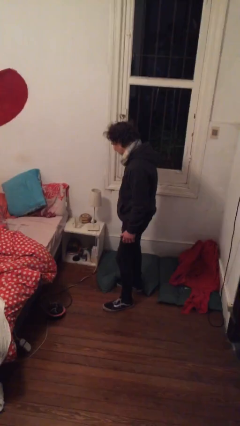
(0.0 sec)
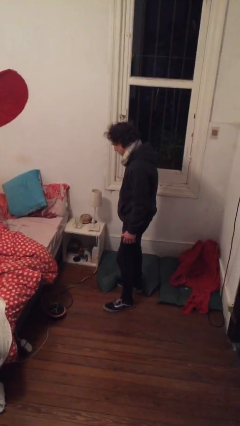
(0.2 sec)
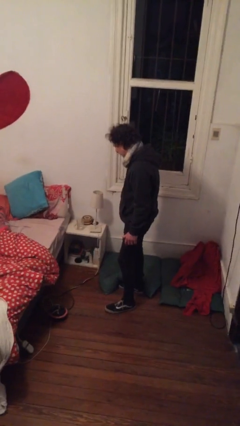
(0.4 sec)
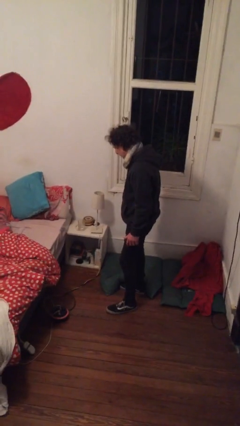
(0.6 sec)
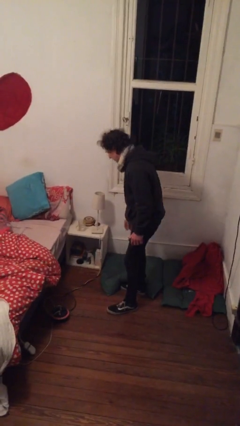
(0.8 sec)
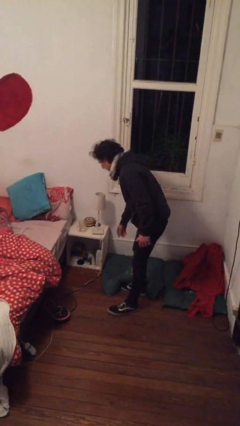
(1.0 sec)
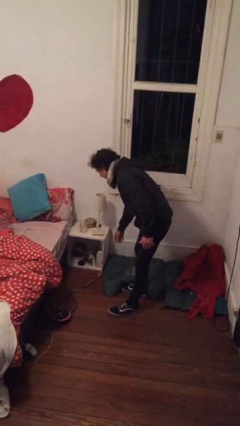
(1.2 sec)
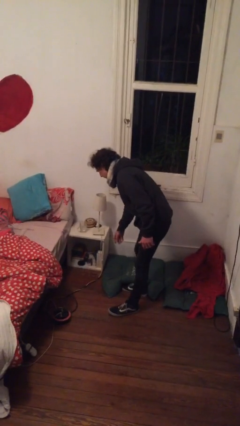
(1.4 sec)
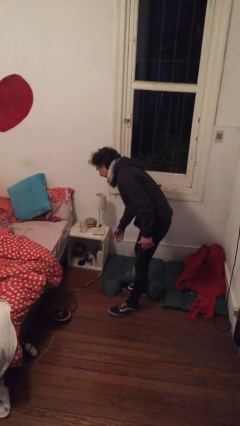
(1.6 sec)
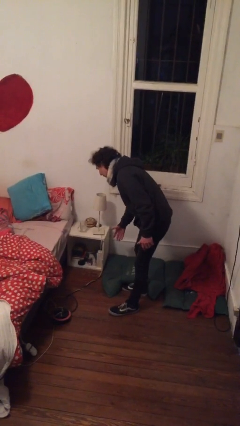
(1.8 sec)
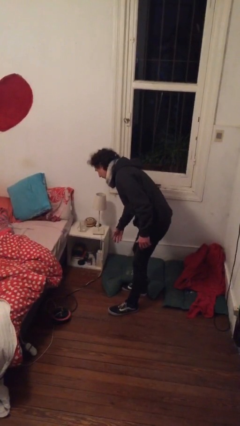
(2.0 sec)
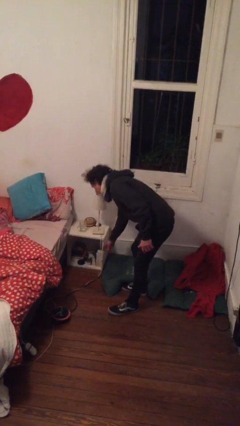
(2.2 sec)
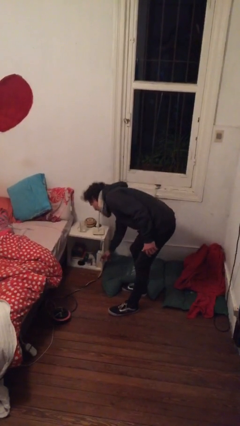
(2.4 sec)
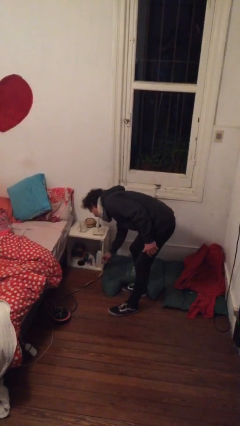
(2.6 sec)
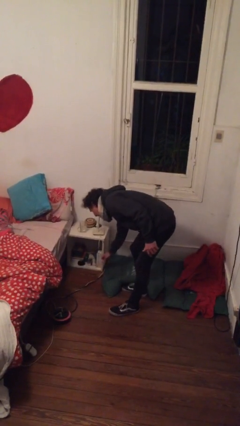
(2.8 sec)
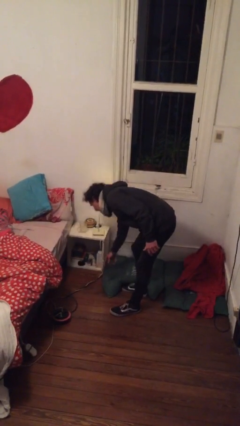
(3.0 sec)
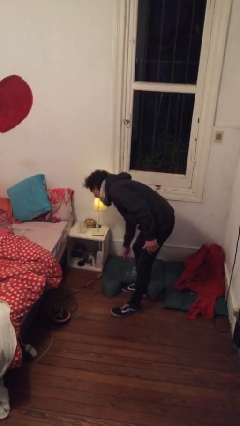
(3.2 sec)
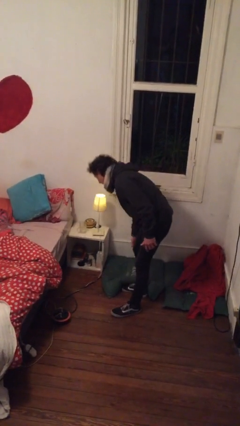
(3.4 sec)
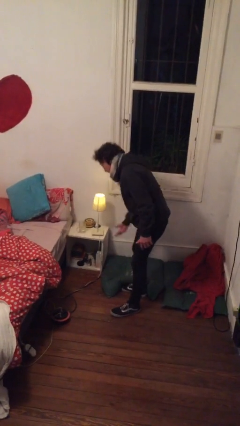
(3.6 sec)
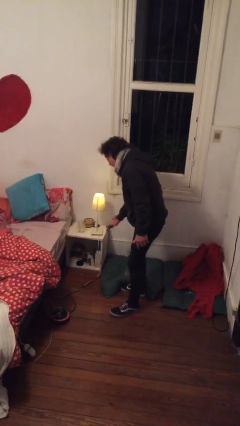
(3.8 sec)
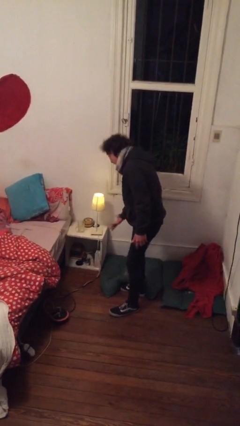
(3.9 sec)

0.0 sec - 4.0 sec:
person turns on lamp

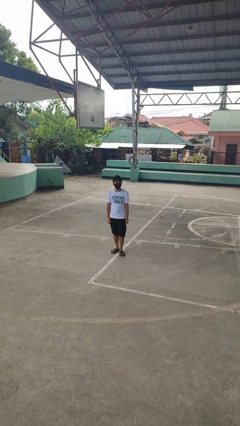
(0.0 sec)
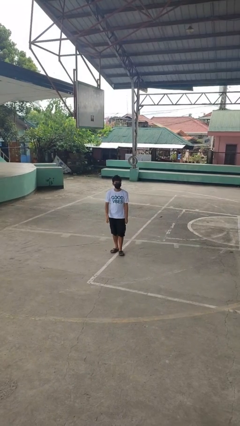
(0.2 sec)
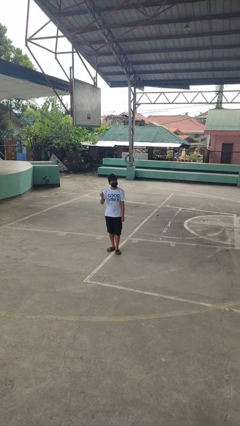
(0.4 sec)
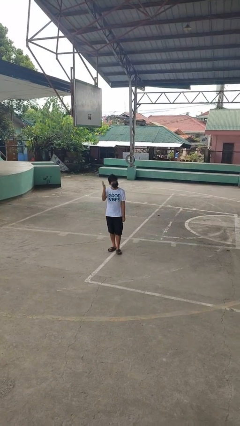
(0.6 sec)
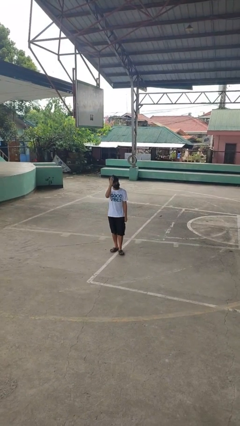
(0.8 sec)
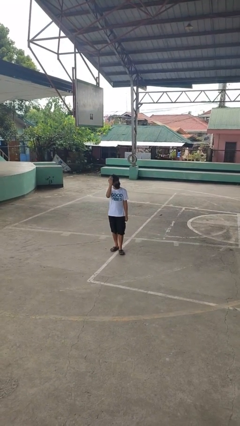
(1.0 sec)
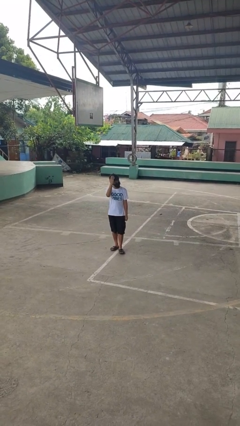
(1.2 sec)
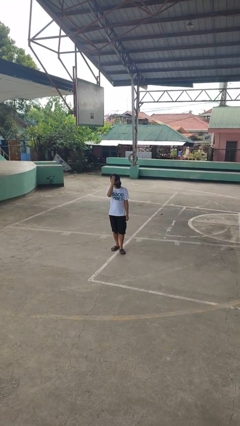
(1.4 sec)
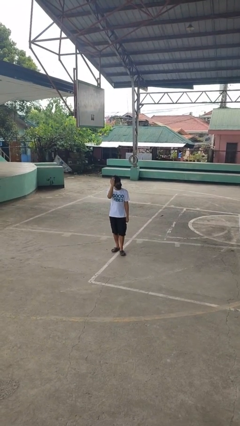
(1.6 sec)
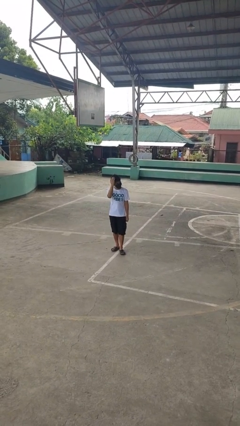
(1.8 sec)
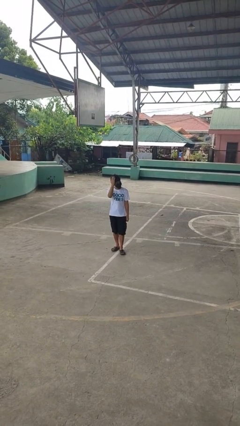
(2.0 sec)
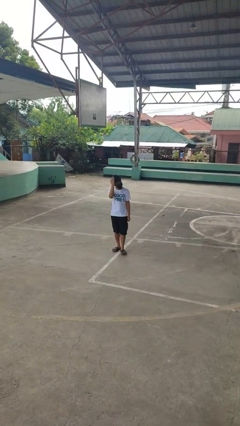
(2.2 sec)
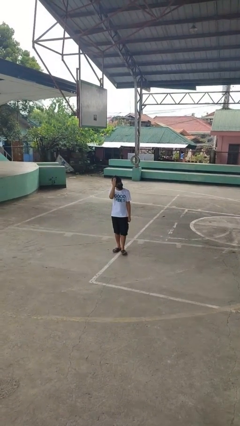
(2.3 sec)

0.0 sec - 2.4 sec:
person pats head

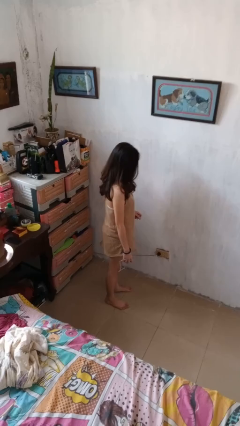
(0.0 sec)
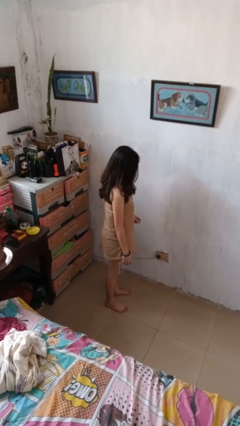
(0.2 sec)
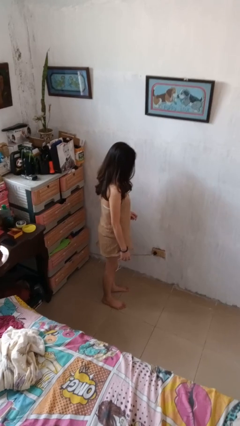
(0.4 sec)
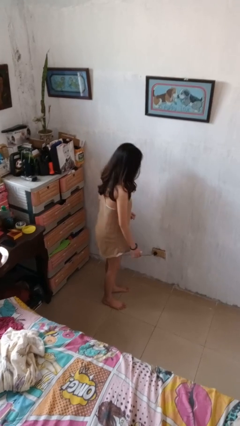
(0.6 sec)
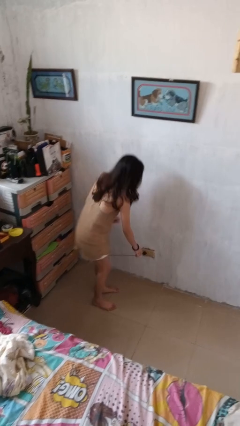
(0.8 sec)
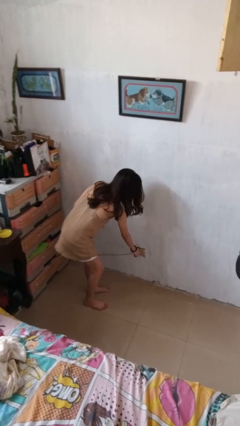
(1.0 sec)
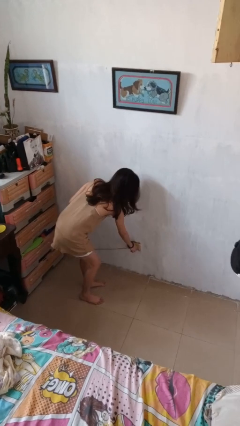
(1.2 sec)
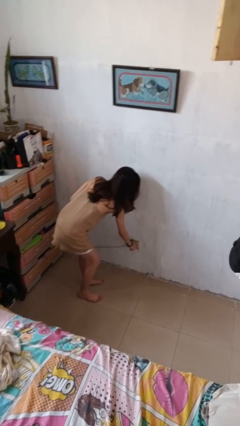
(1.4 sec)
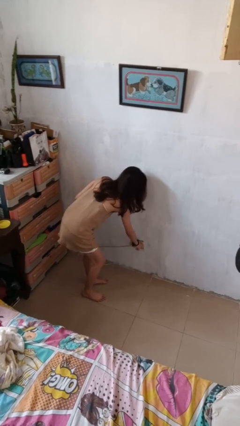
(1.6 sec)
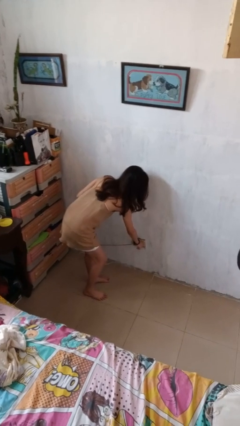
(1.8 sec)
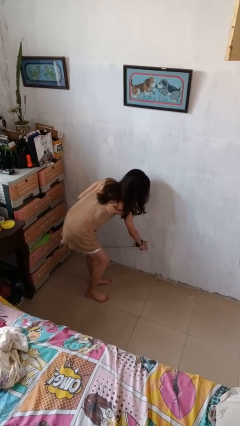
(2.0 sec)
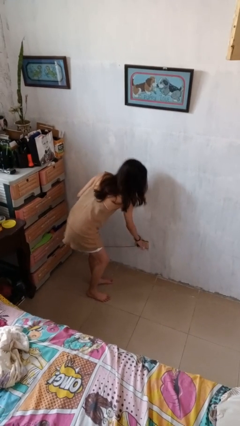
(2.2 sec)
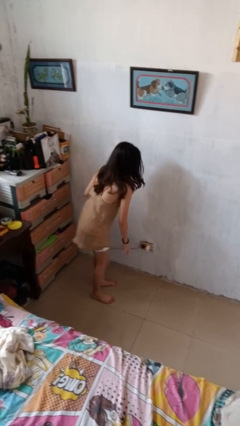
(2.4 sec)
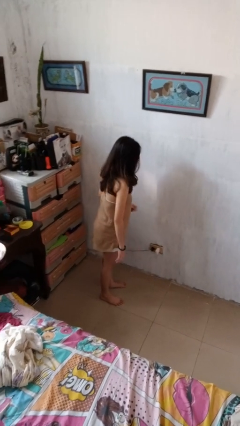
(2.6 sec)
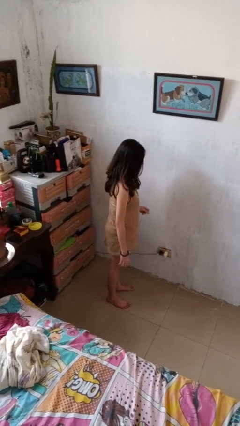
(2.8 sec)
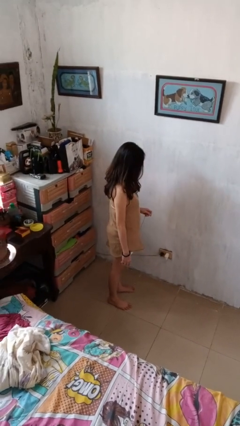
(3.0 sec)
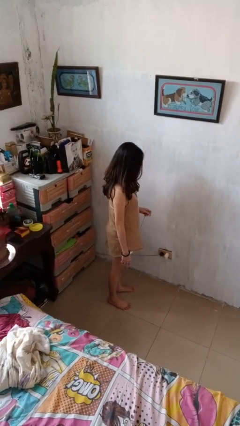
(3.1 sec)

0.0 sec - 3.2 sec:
person plugs into electrical socket

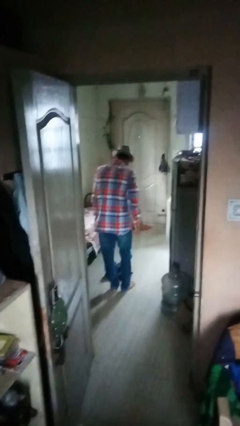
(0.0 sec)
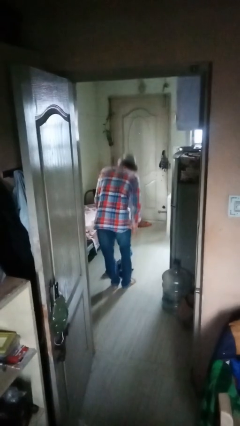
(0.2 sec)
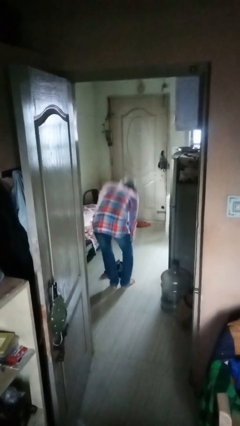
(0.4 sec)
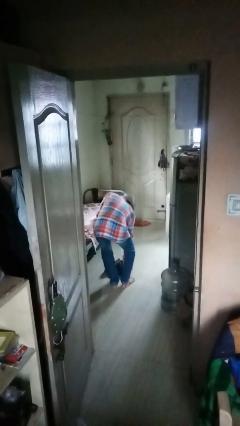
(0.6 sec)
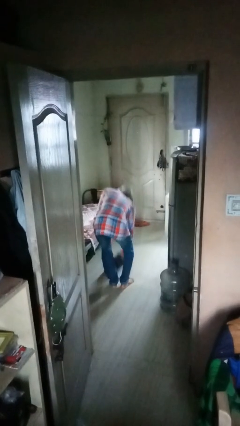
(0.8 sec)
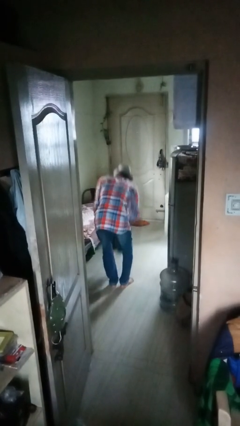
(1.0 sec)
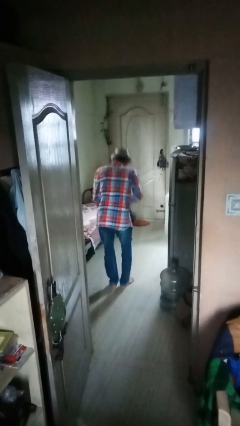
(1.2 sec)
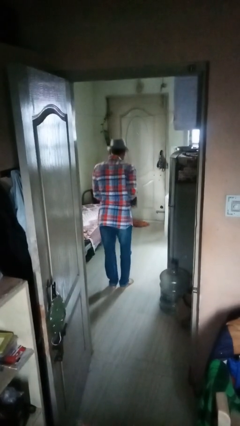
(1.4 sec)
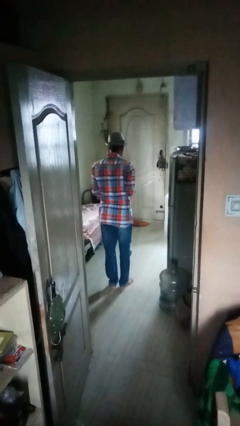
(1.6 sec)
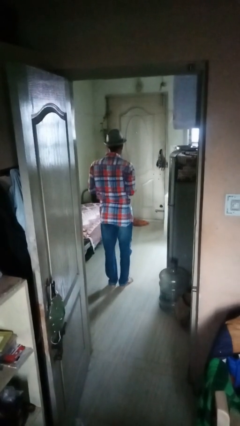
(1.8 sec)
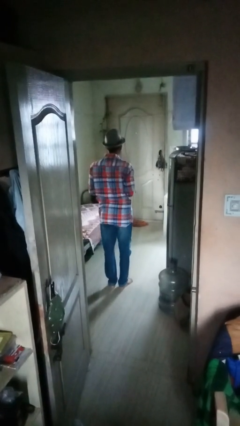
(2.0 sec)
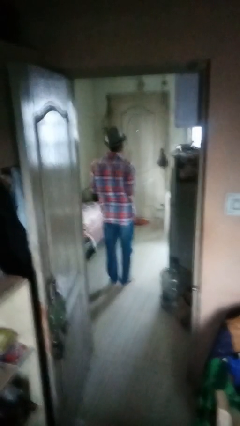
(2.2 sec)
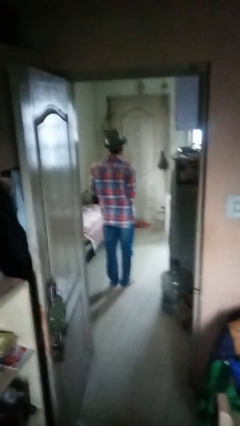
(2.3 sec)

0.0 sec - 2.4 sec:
person picks up object from floor

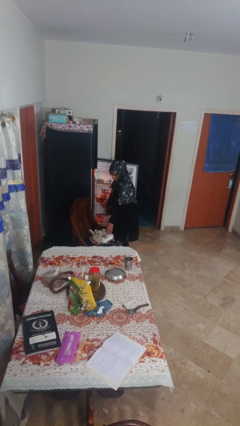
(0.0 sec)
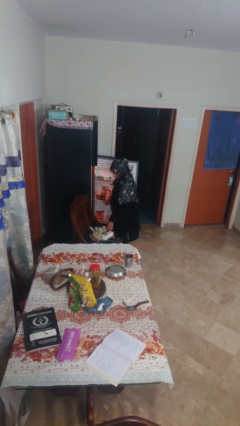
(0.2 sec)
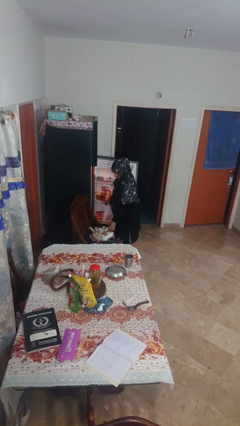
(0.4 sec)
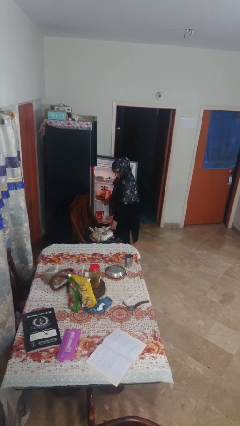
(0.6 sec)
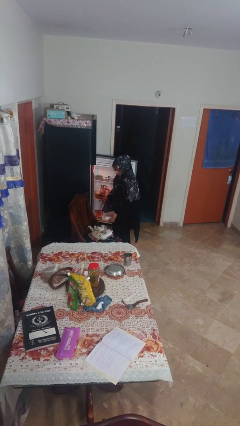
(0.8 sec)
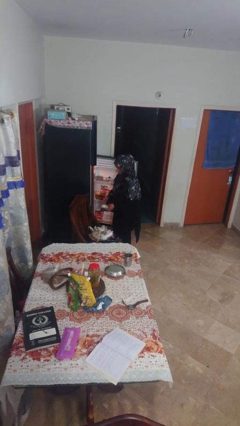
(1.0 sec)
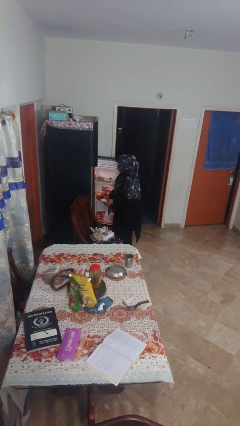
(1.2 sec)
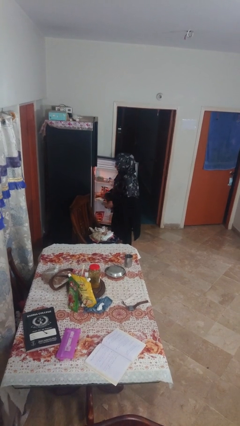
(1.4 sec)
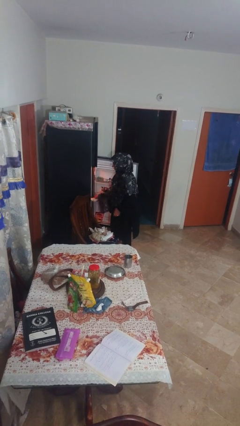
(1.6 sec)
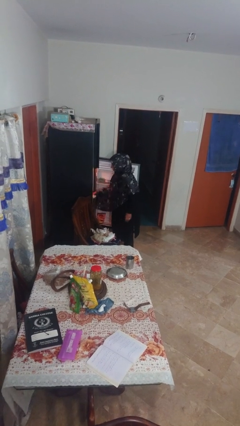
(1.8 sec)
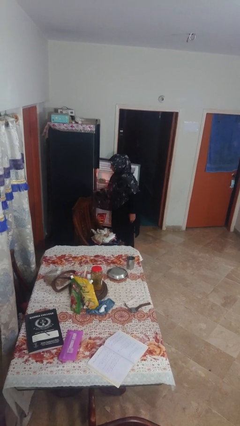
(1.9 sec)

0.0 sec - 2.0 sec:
person loads groceries into refrigerator

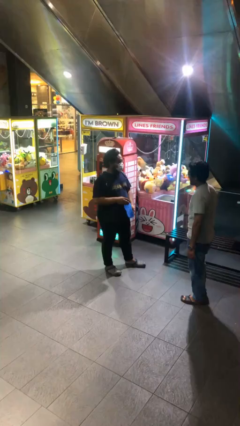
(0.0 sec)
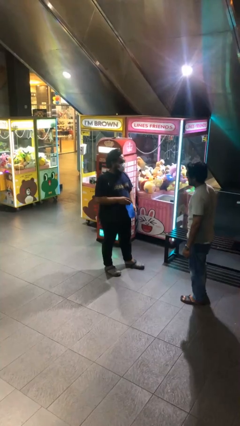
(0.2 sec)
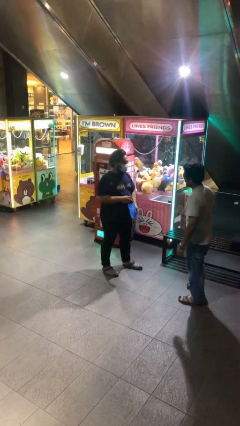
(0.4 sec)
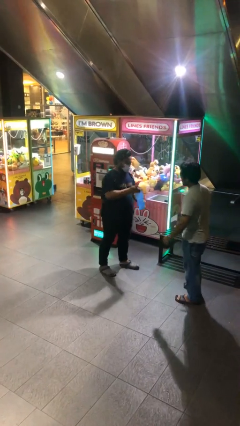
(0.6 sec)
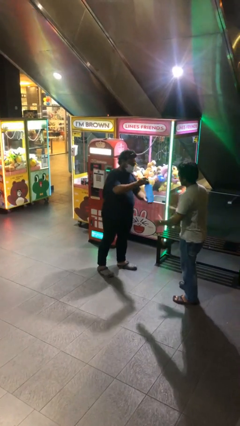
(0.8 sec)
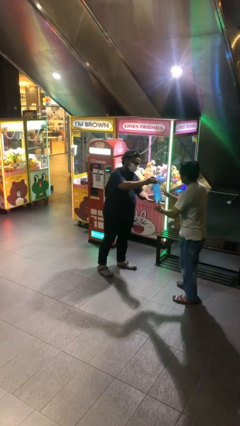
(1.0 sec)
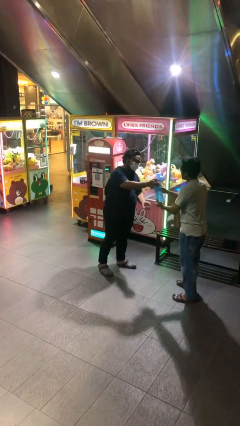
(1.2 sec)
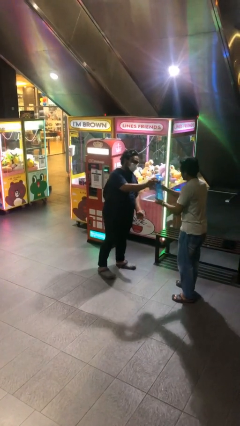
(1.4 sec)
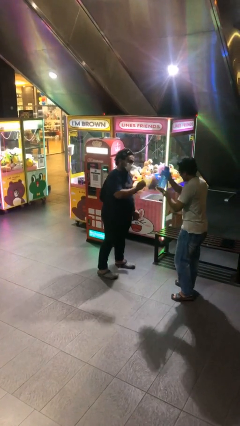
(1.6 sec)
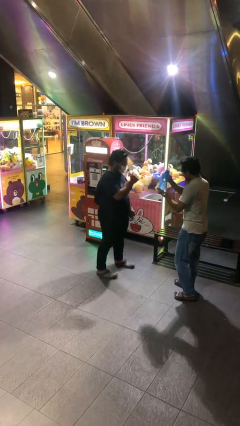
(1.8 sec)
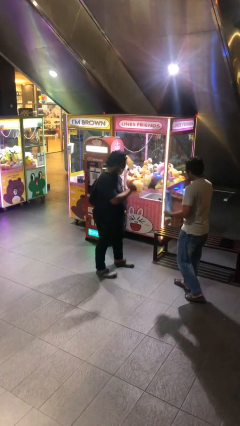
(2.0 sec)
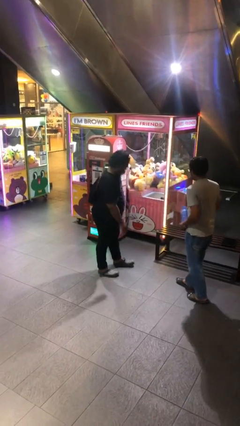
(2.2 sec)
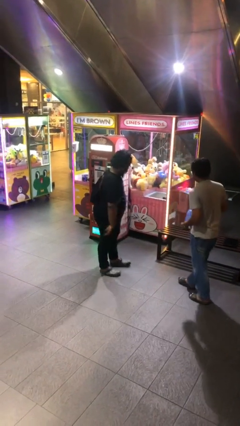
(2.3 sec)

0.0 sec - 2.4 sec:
person transfers object to person
